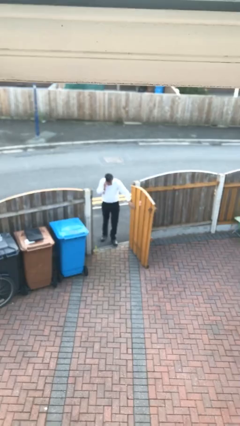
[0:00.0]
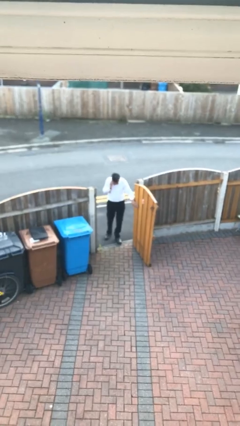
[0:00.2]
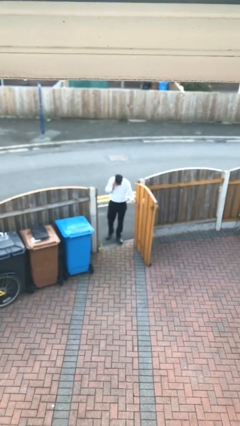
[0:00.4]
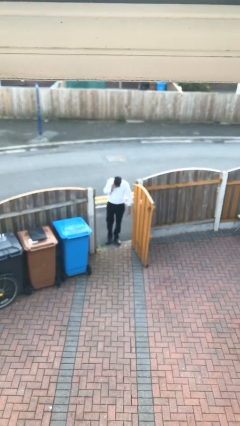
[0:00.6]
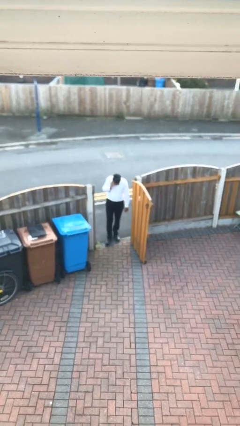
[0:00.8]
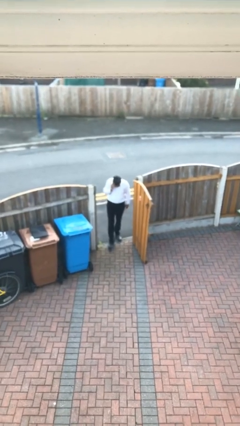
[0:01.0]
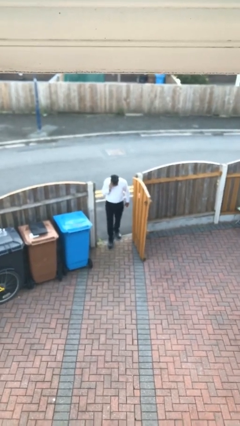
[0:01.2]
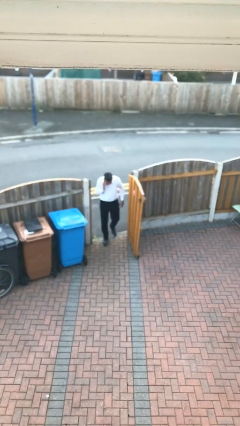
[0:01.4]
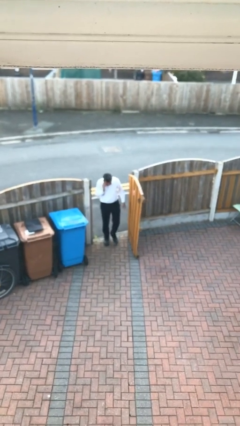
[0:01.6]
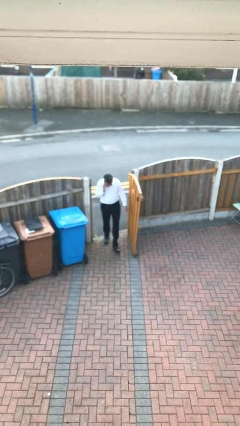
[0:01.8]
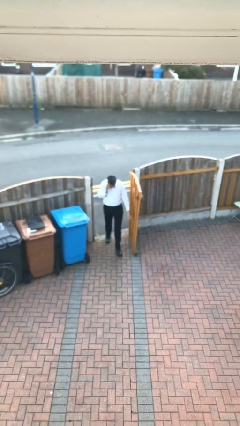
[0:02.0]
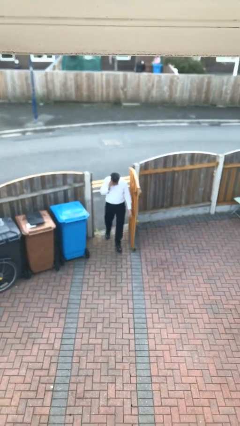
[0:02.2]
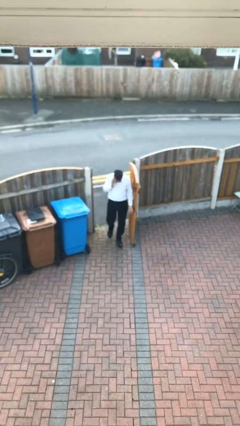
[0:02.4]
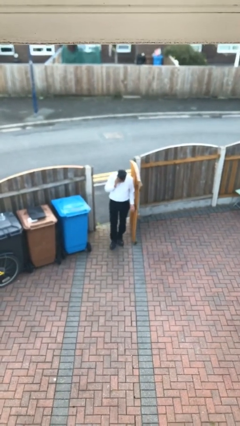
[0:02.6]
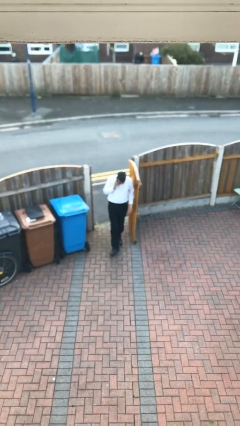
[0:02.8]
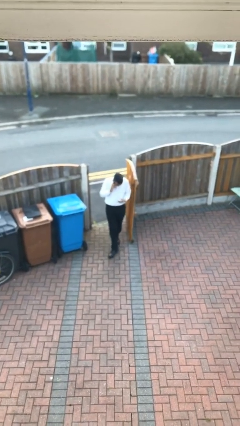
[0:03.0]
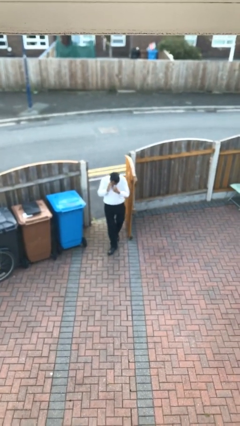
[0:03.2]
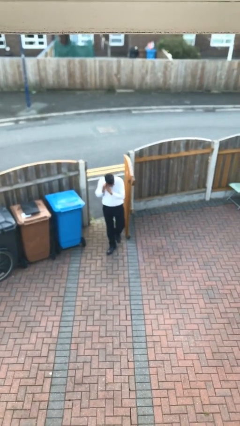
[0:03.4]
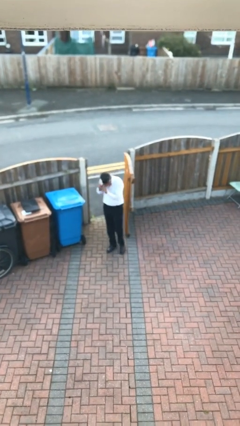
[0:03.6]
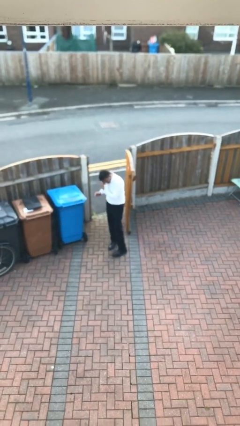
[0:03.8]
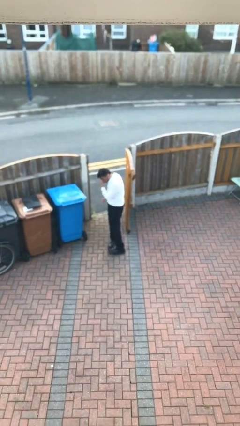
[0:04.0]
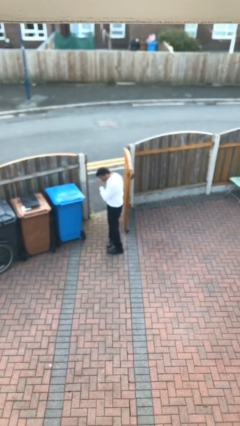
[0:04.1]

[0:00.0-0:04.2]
person enters scene through structure

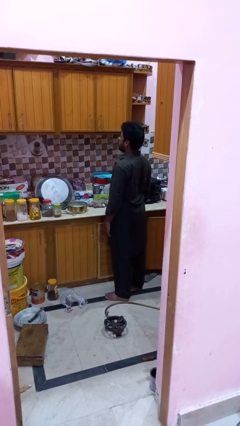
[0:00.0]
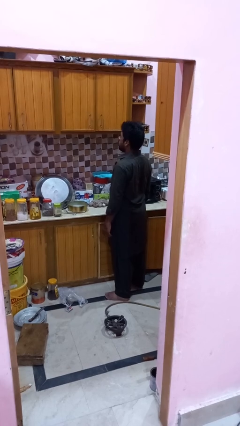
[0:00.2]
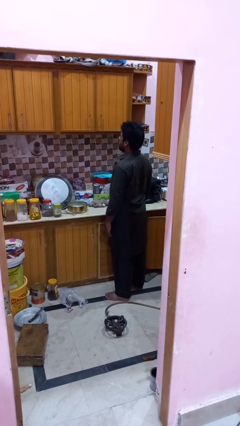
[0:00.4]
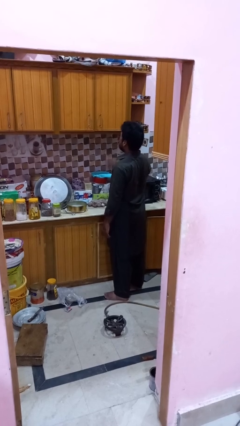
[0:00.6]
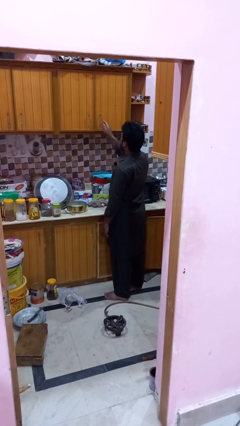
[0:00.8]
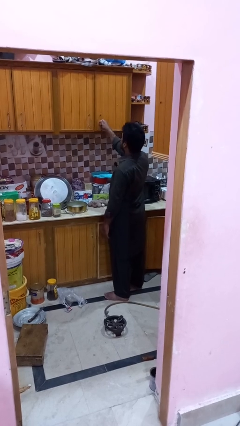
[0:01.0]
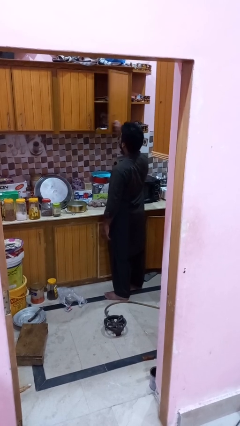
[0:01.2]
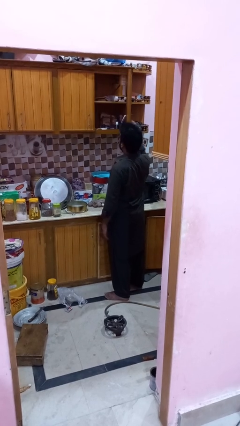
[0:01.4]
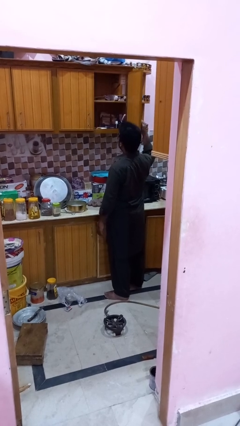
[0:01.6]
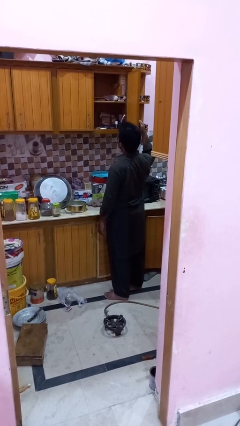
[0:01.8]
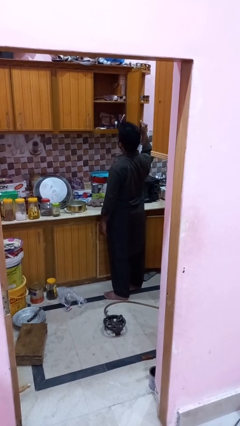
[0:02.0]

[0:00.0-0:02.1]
person opens cabinet

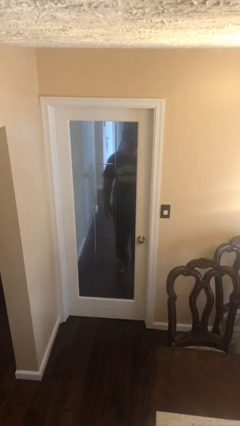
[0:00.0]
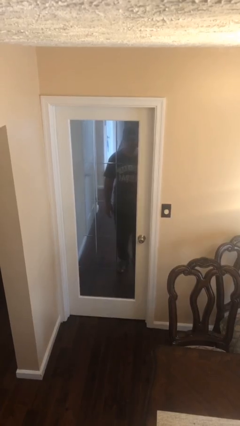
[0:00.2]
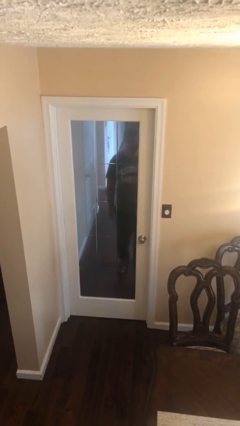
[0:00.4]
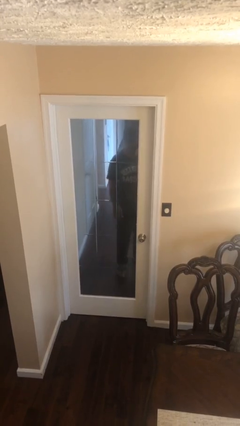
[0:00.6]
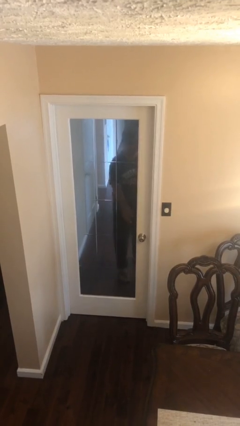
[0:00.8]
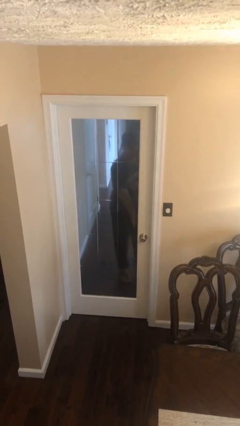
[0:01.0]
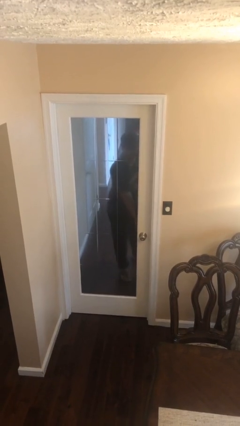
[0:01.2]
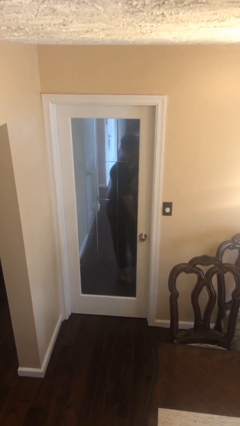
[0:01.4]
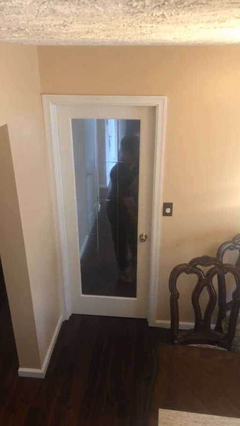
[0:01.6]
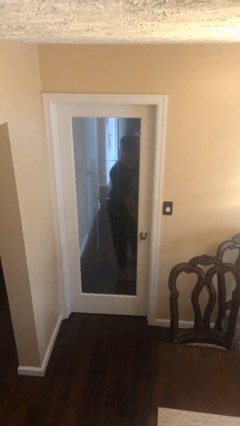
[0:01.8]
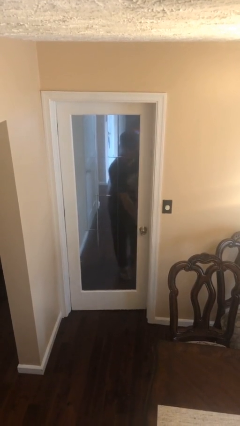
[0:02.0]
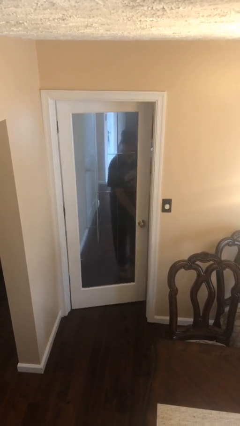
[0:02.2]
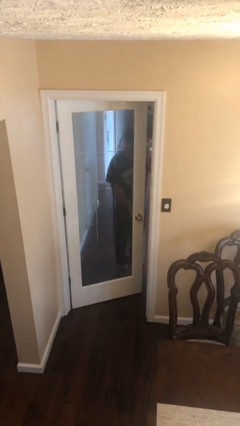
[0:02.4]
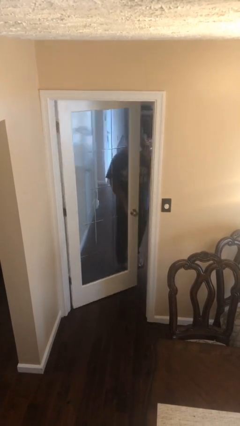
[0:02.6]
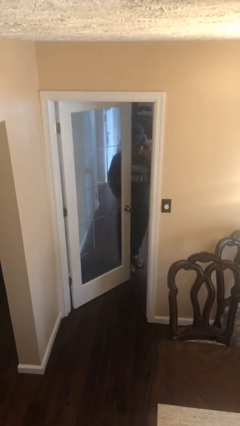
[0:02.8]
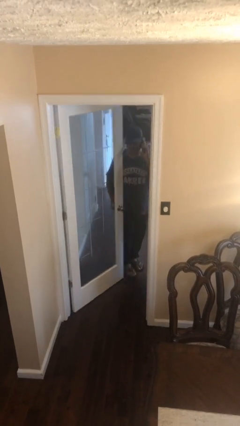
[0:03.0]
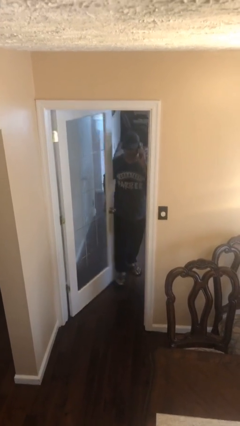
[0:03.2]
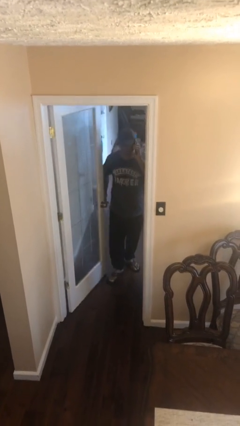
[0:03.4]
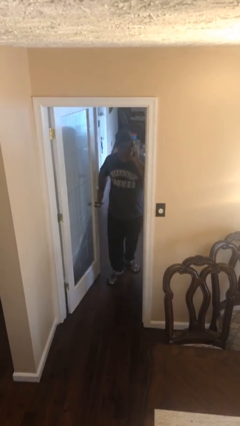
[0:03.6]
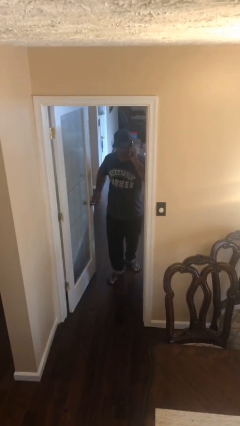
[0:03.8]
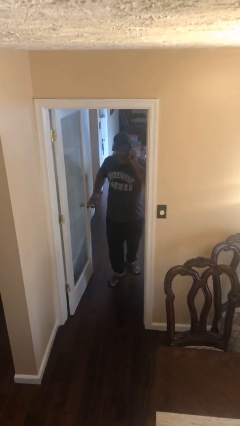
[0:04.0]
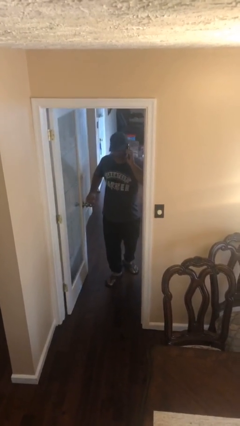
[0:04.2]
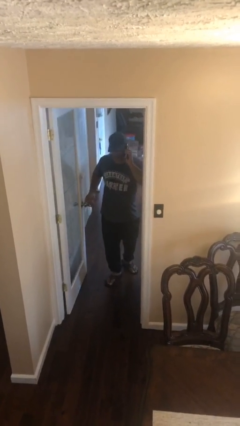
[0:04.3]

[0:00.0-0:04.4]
person opens facility door

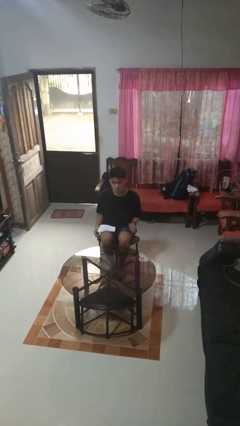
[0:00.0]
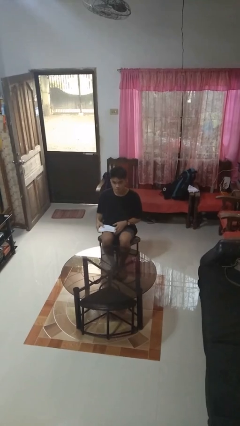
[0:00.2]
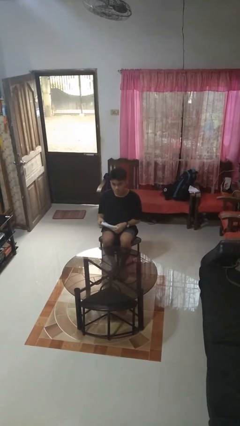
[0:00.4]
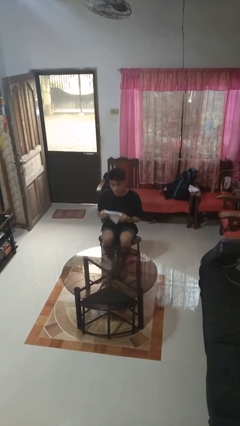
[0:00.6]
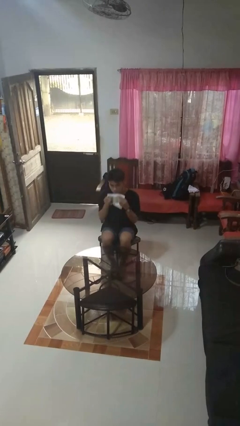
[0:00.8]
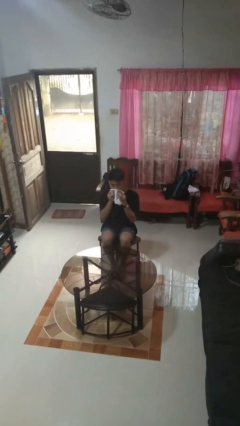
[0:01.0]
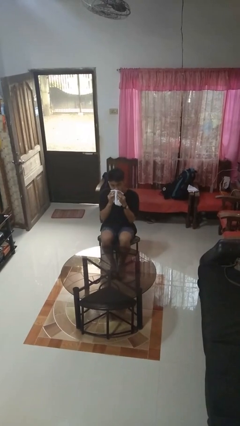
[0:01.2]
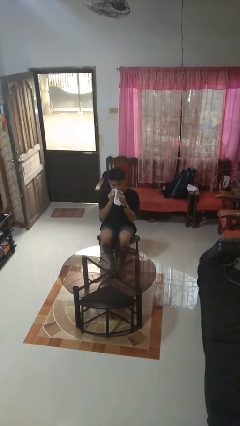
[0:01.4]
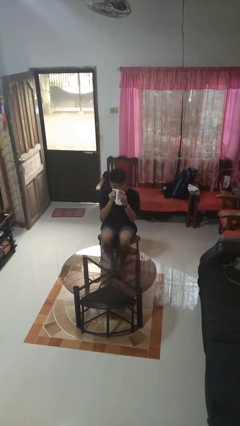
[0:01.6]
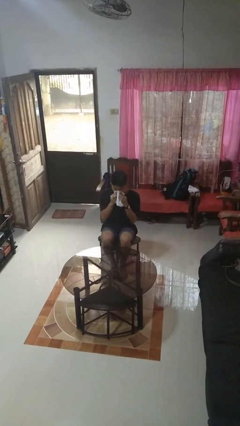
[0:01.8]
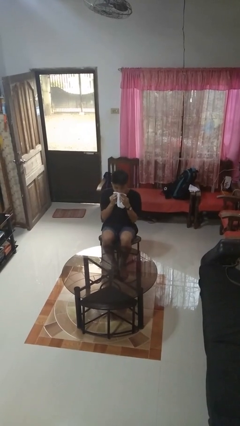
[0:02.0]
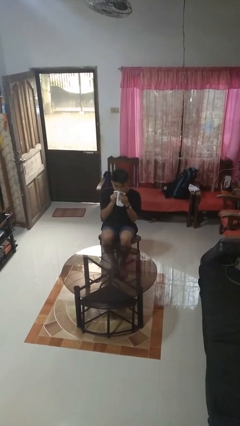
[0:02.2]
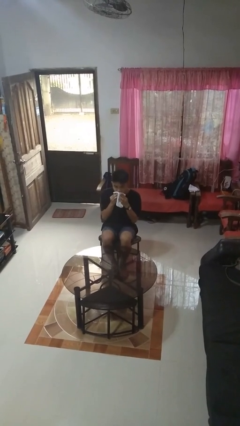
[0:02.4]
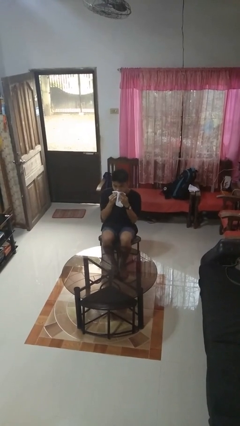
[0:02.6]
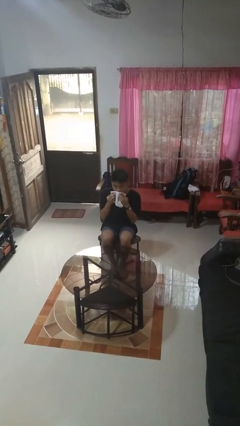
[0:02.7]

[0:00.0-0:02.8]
person wipes mouth with napkin

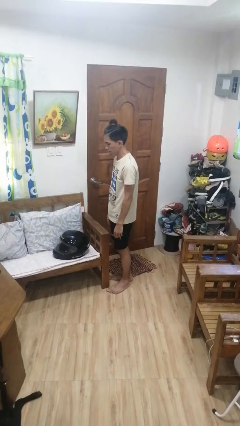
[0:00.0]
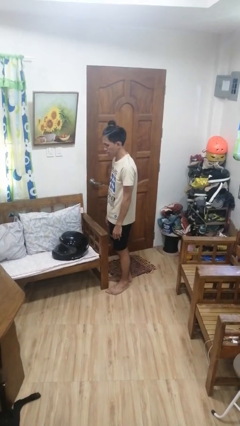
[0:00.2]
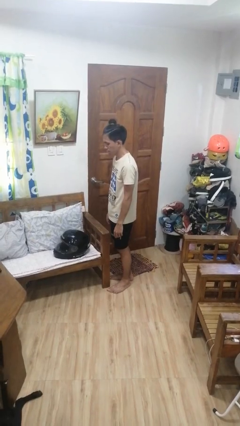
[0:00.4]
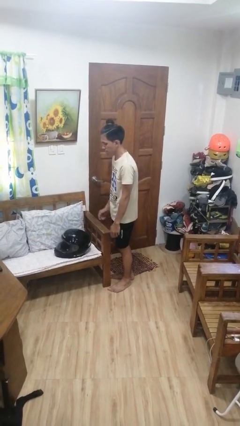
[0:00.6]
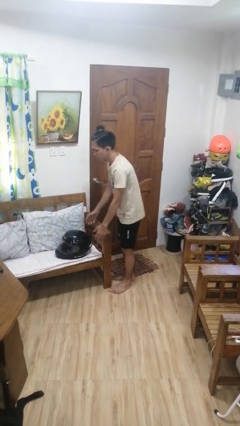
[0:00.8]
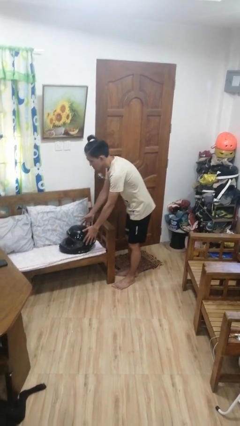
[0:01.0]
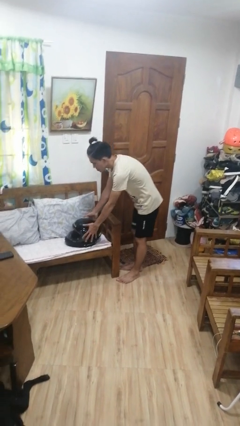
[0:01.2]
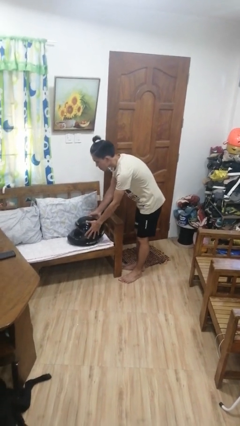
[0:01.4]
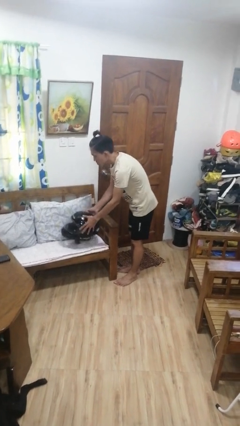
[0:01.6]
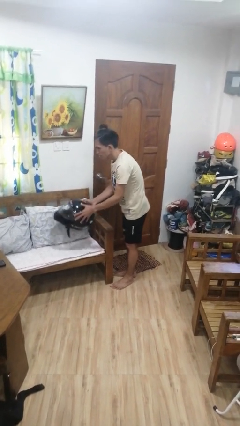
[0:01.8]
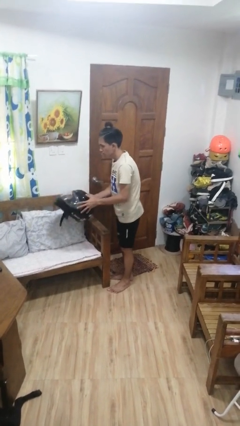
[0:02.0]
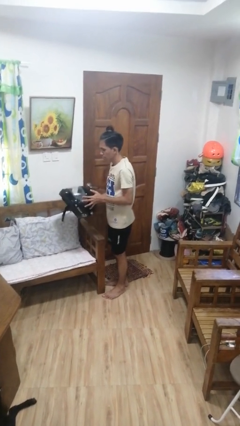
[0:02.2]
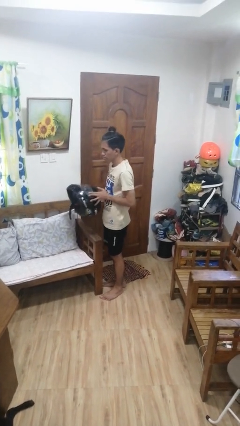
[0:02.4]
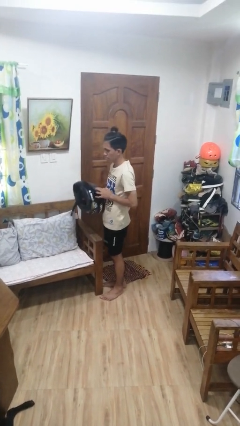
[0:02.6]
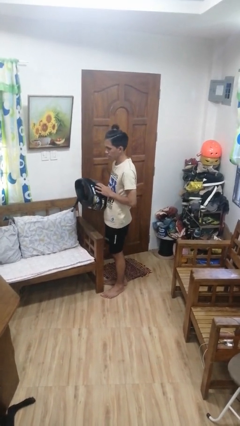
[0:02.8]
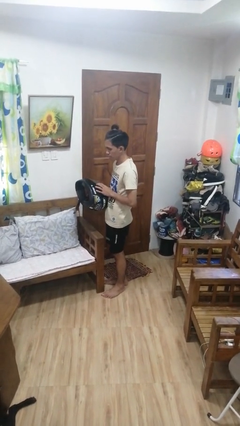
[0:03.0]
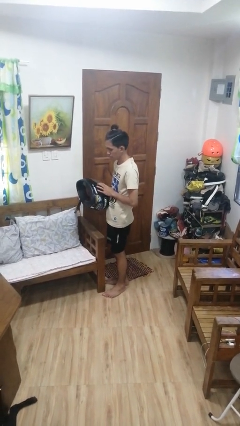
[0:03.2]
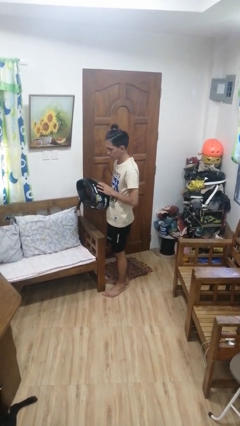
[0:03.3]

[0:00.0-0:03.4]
person picks up object from couch

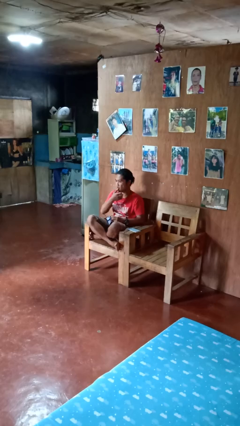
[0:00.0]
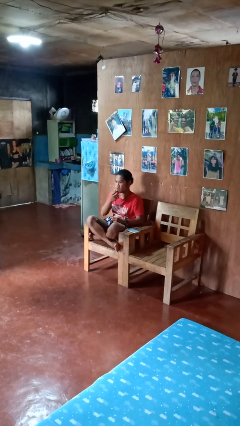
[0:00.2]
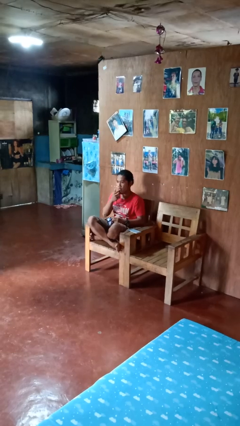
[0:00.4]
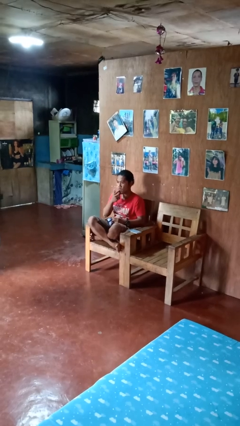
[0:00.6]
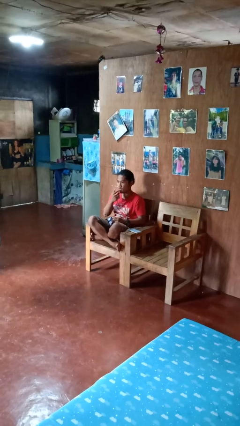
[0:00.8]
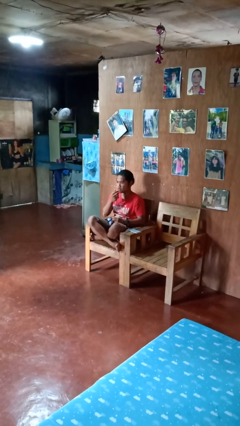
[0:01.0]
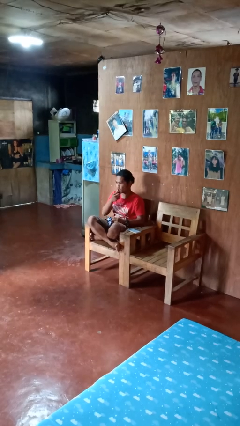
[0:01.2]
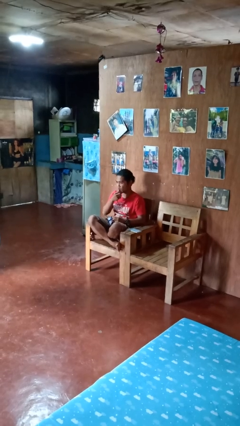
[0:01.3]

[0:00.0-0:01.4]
person licks fingers
